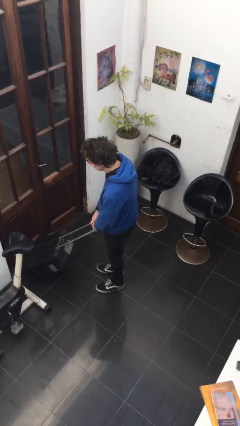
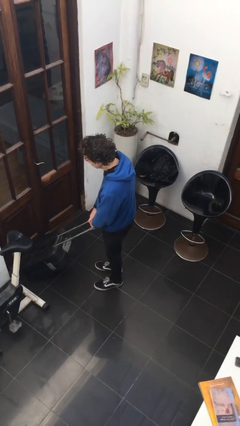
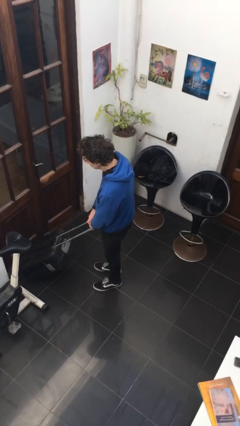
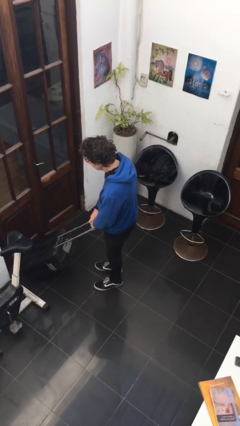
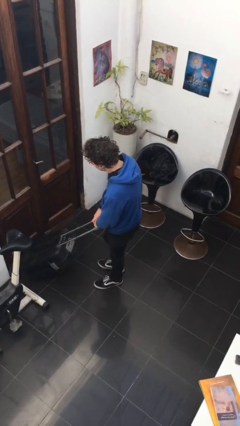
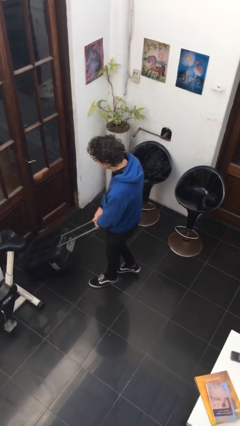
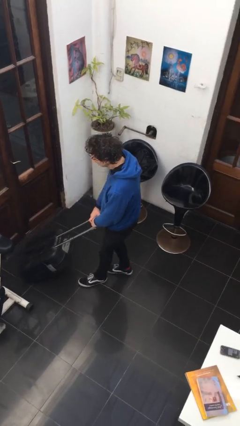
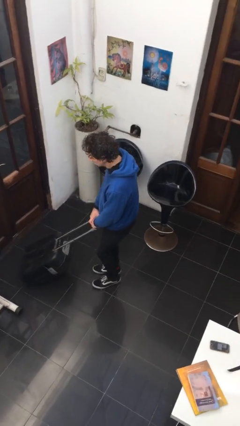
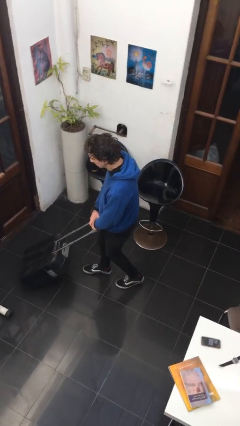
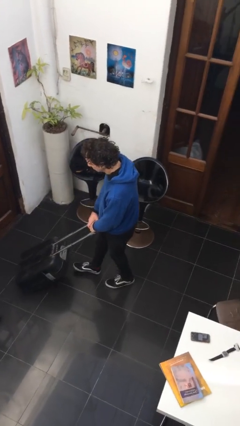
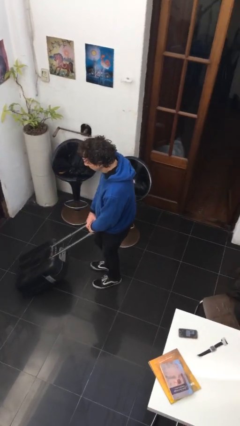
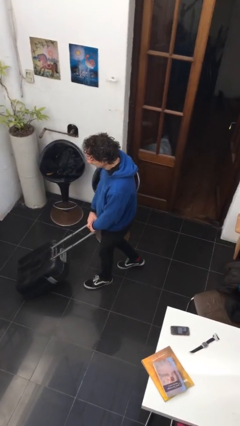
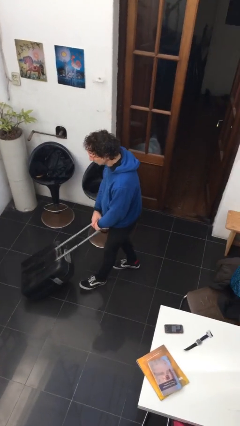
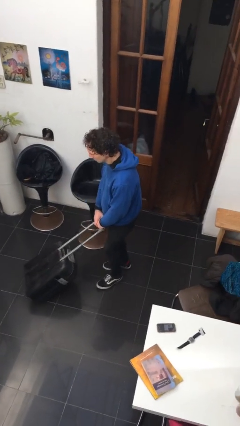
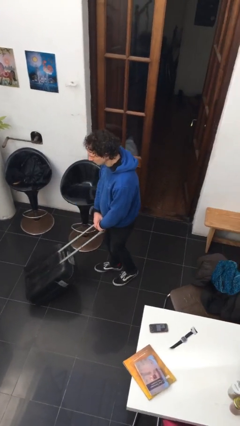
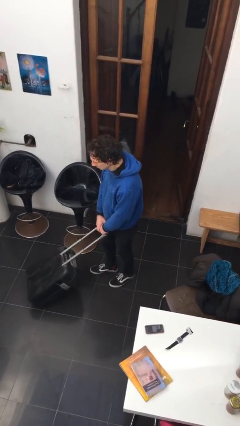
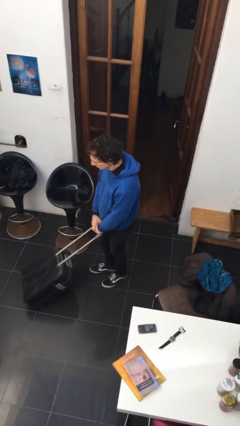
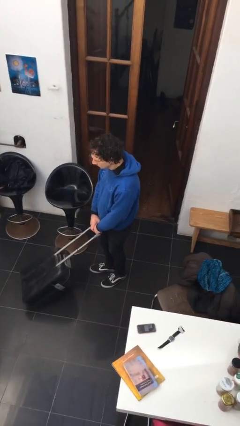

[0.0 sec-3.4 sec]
person pulls wheeled cart

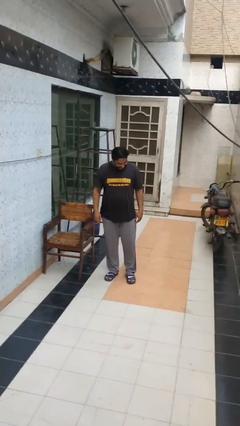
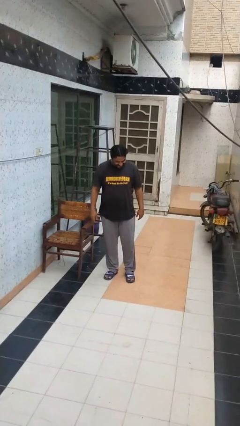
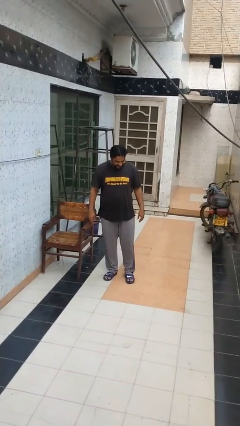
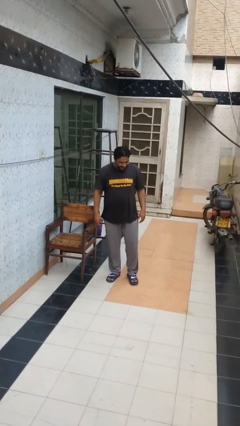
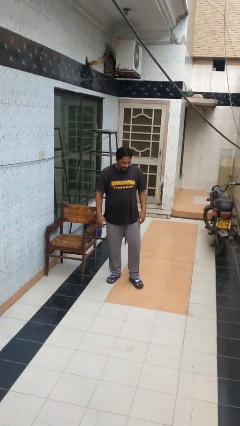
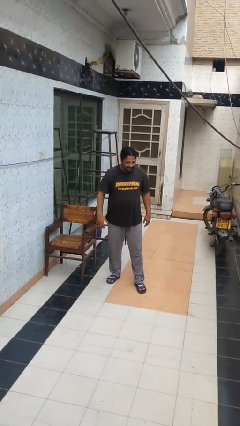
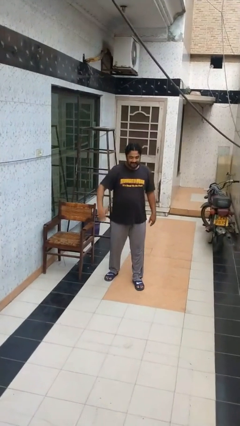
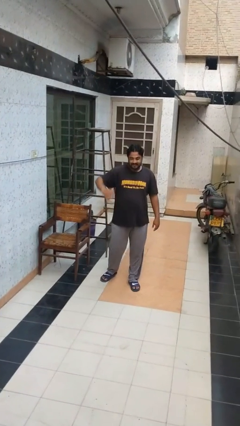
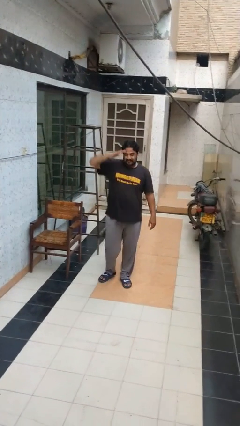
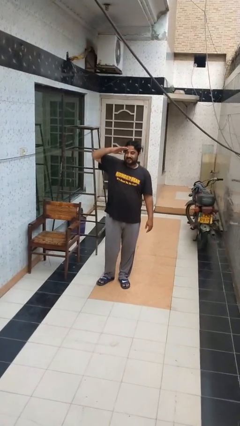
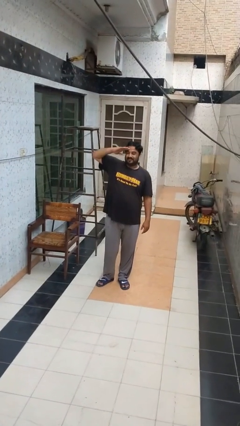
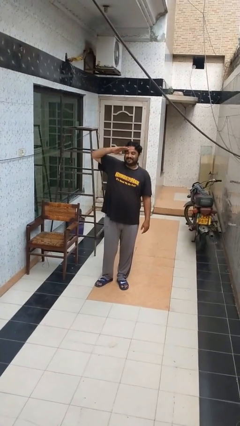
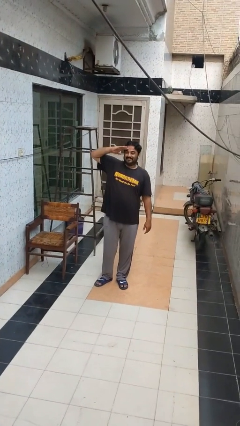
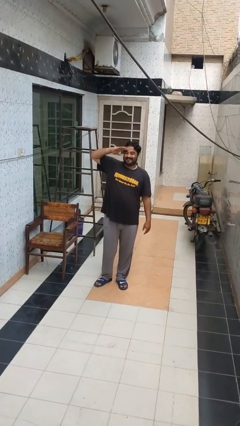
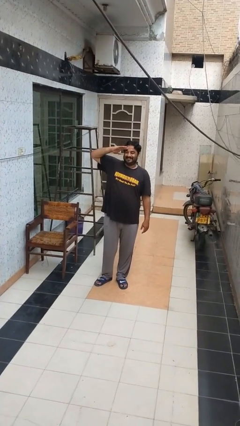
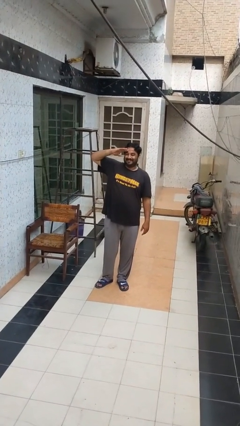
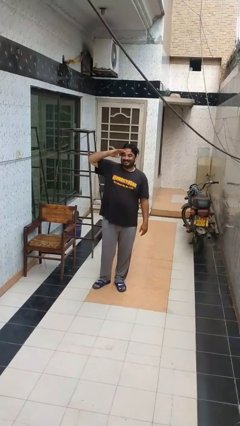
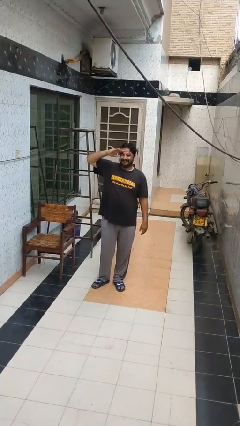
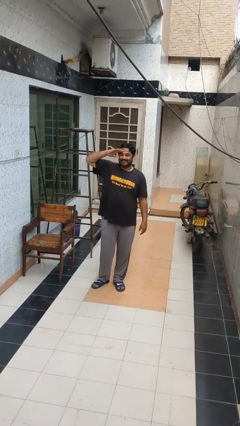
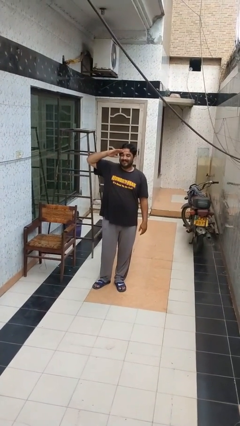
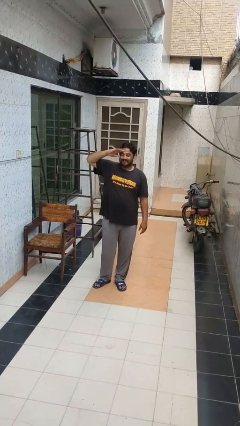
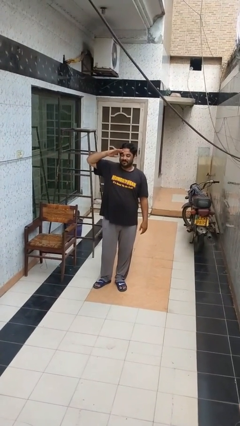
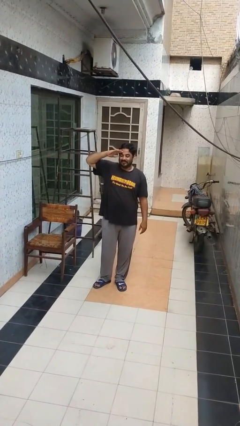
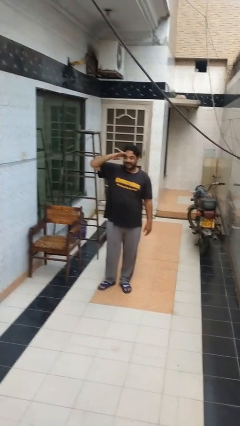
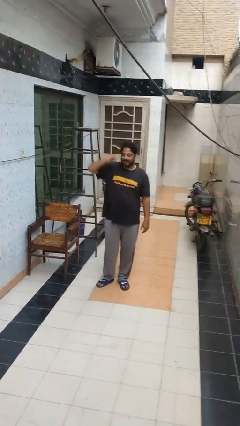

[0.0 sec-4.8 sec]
person salutes

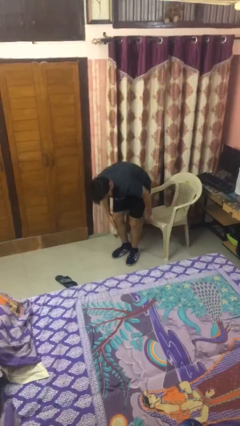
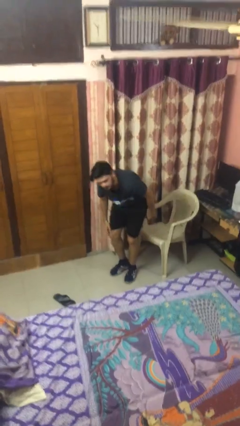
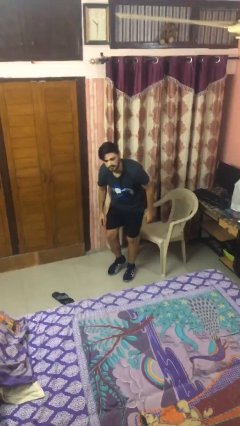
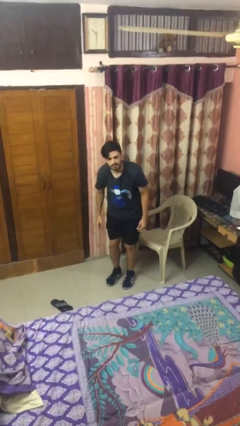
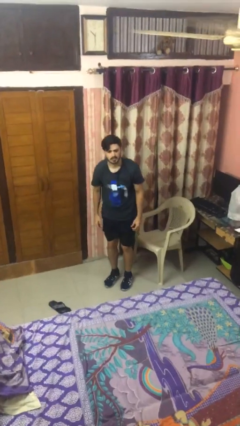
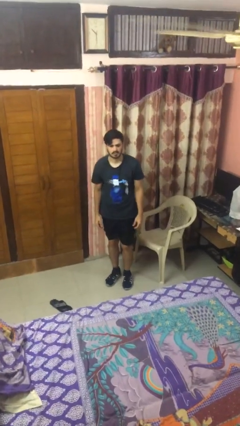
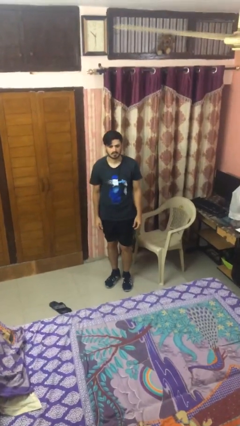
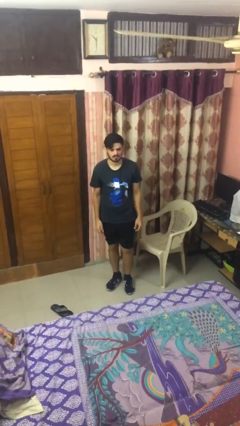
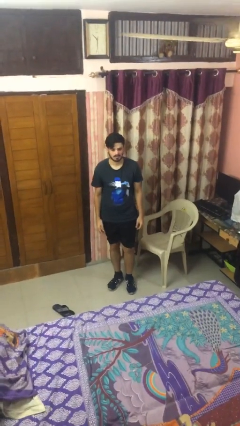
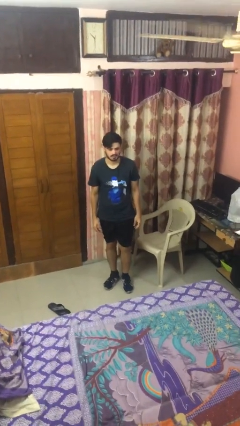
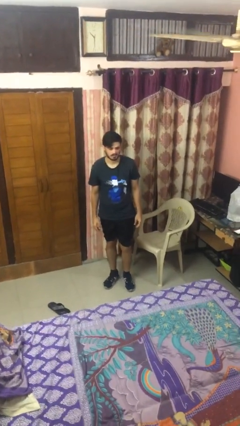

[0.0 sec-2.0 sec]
person stands up from floor

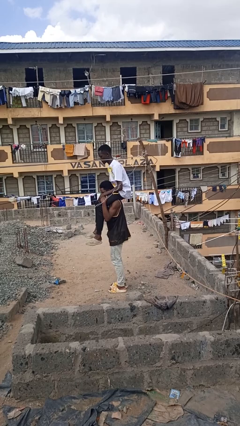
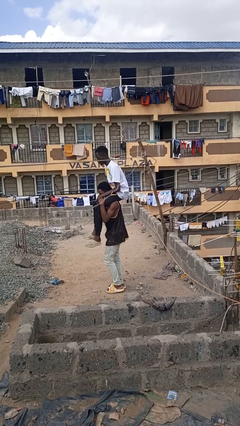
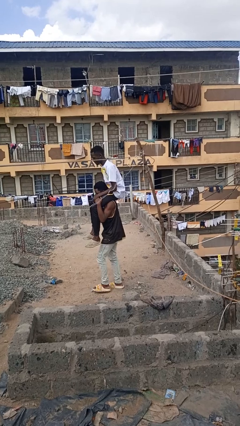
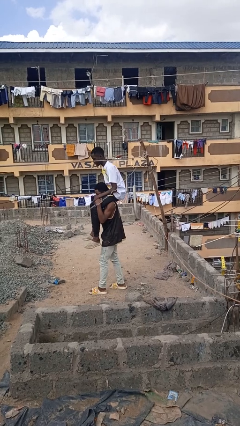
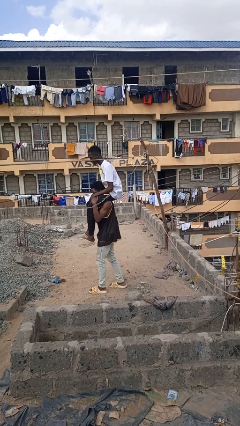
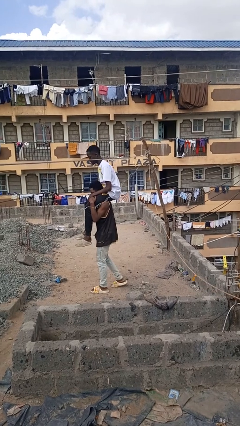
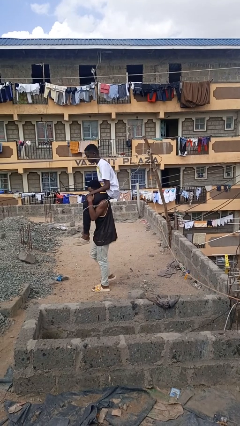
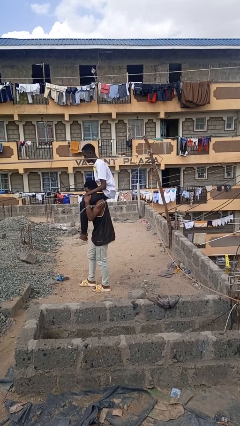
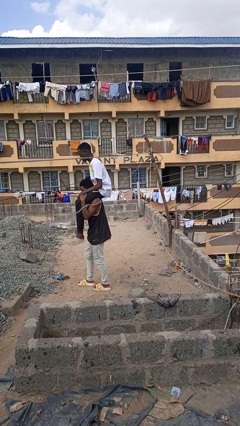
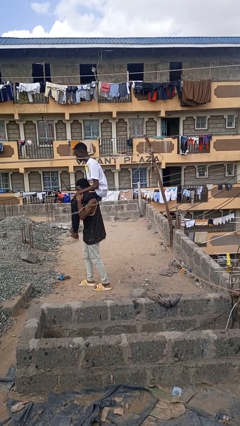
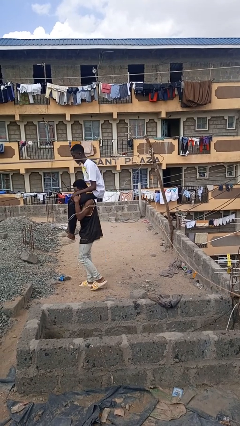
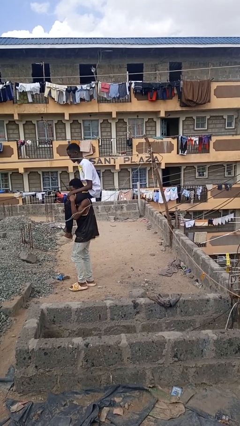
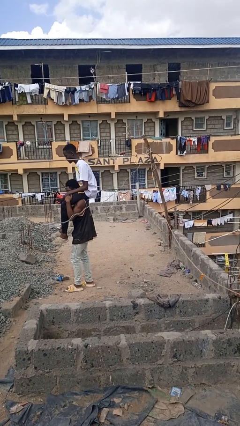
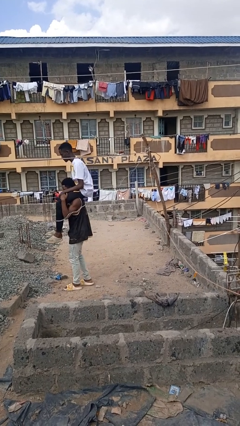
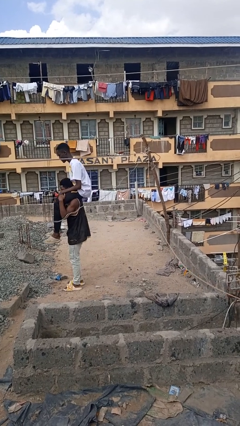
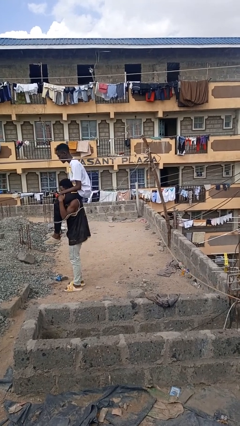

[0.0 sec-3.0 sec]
person carries person on shoulders

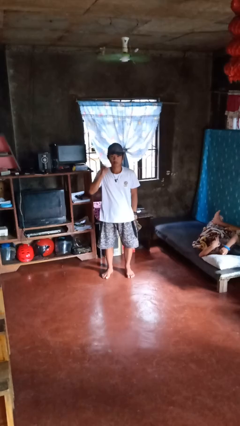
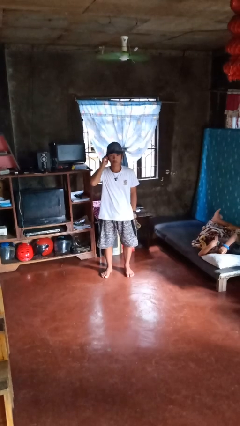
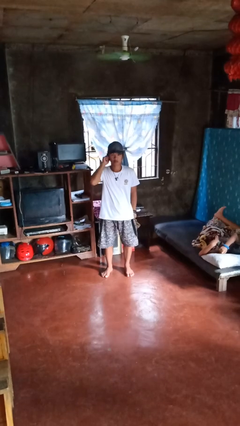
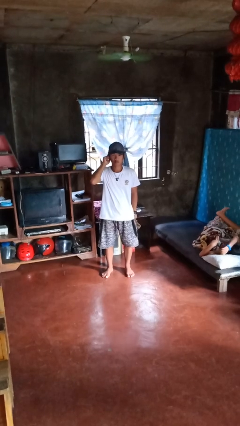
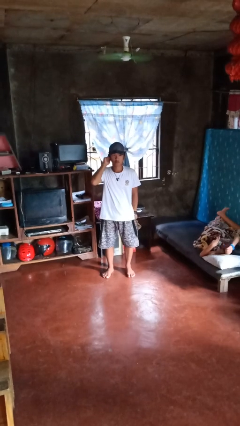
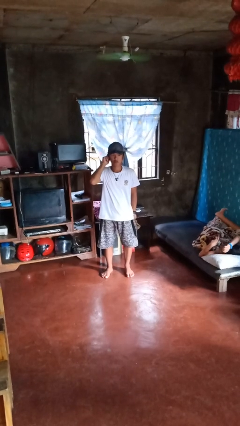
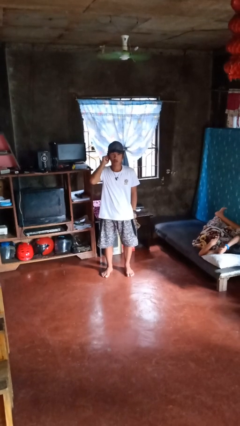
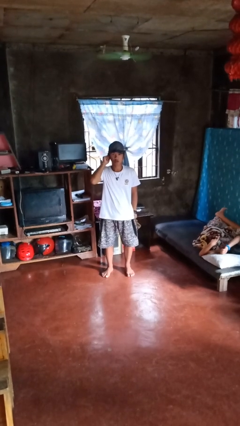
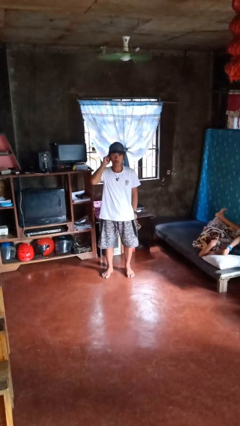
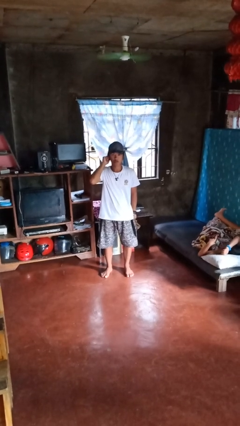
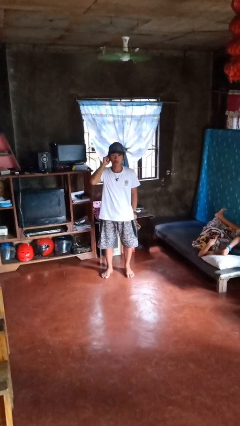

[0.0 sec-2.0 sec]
person touches earlobe

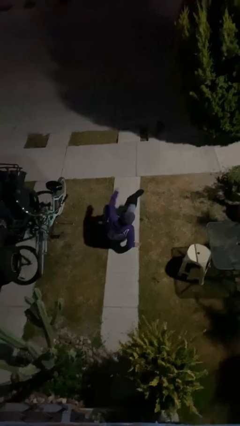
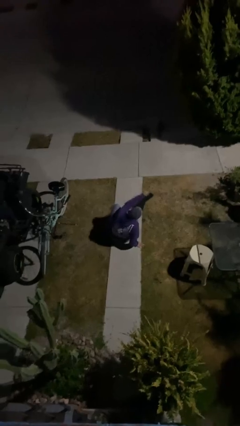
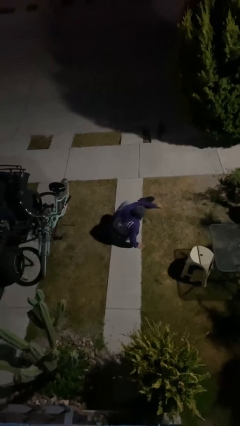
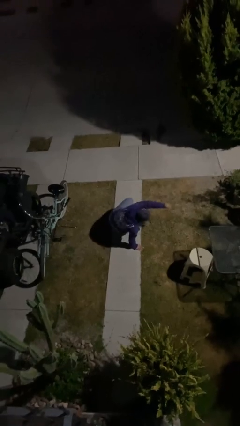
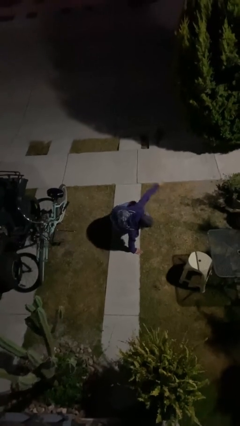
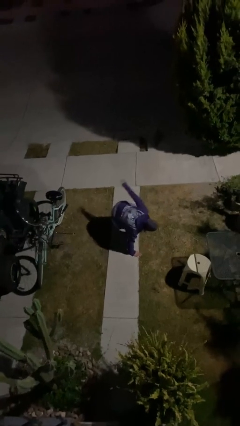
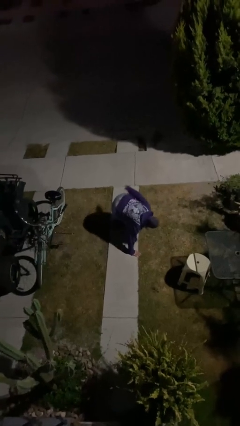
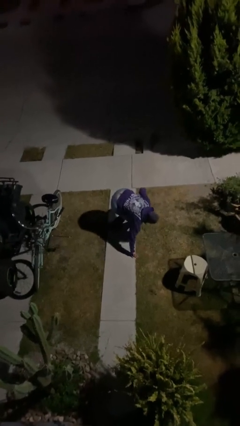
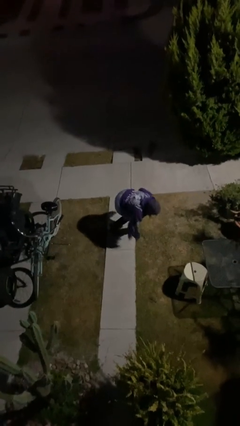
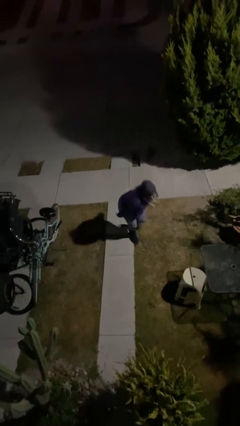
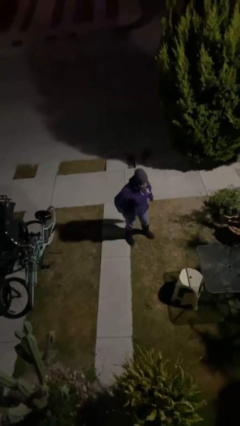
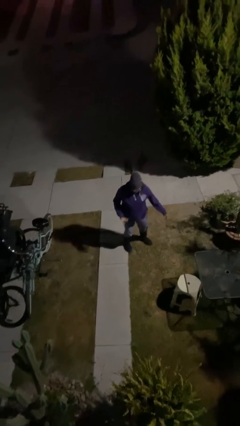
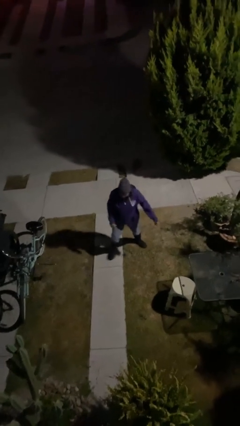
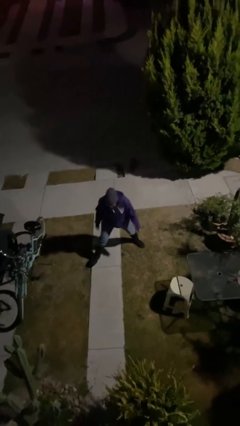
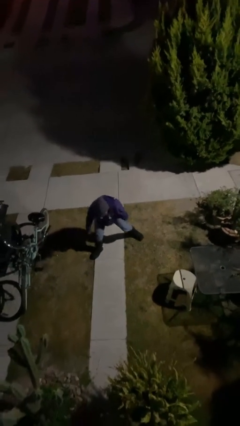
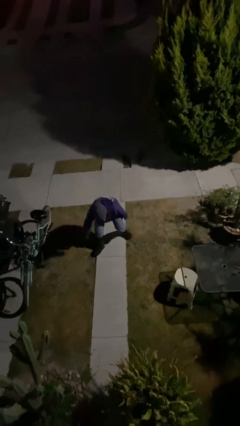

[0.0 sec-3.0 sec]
person stands up
